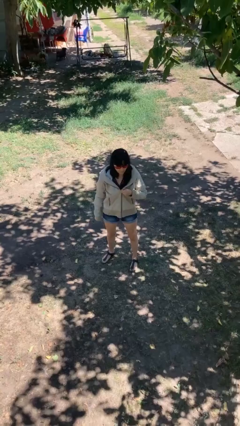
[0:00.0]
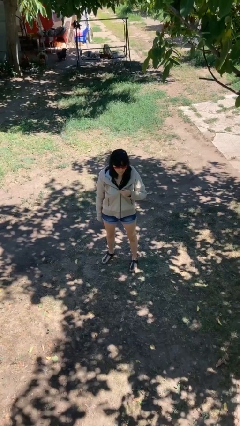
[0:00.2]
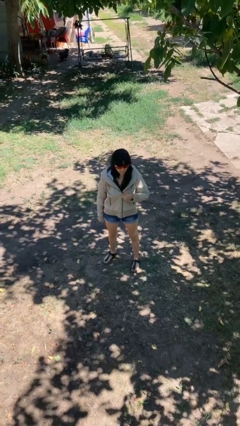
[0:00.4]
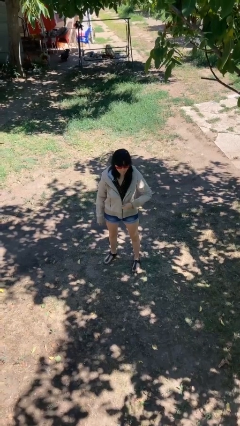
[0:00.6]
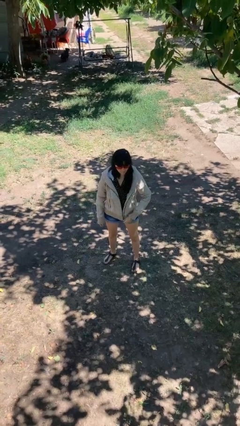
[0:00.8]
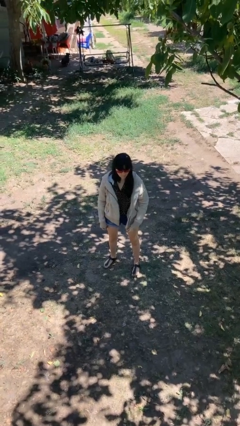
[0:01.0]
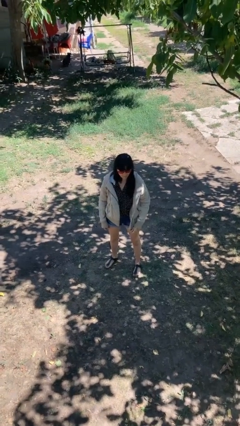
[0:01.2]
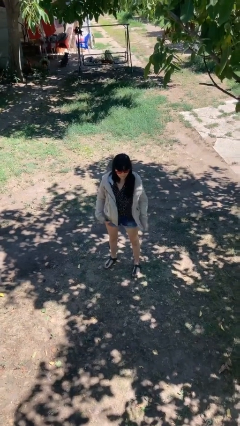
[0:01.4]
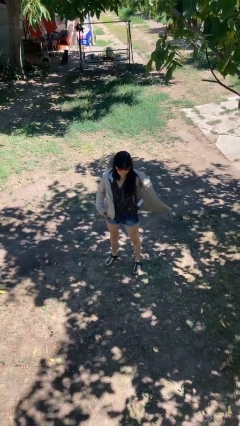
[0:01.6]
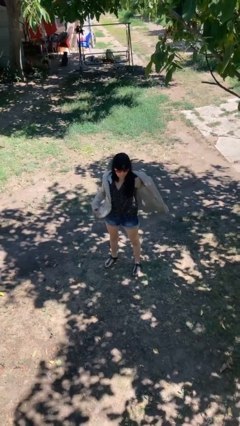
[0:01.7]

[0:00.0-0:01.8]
person unzips jacket

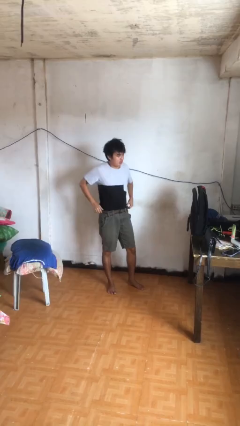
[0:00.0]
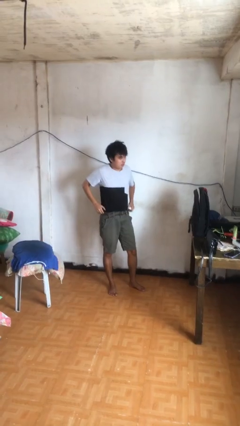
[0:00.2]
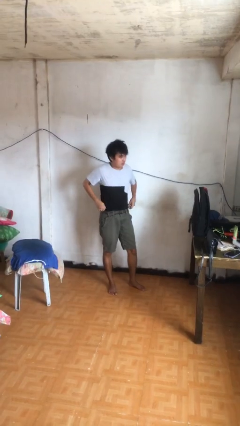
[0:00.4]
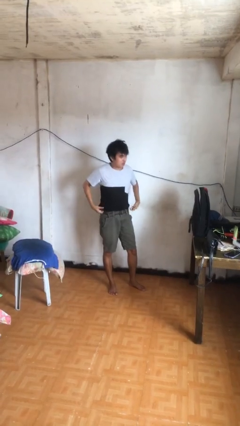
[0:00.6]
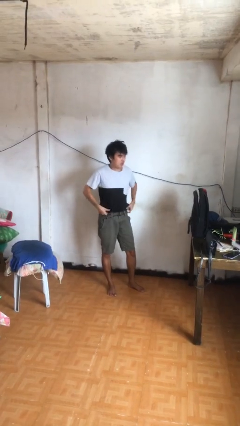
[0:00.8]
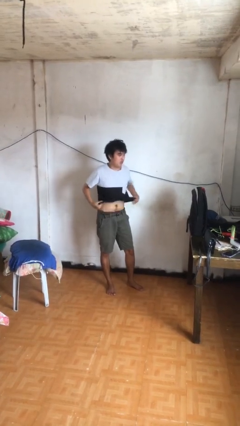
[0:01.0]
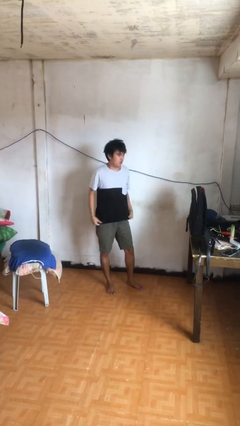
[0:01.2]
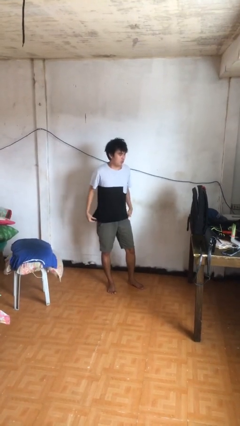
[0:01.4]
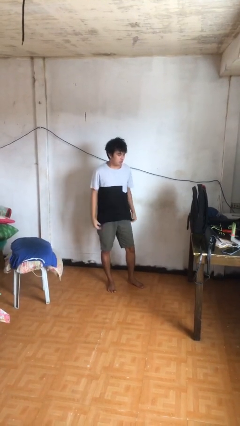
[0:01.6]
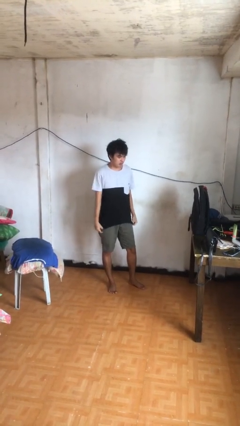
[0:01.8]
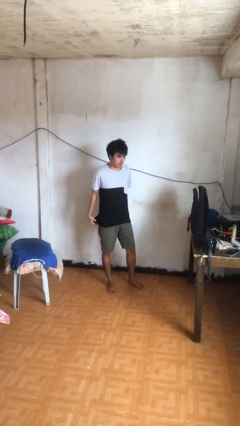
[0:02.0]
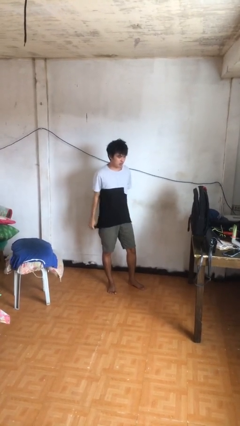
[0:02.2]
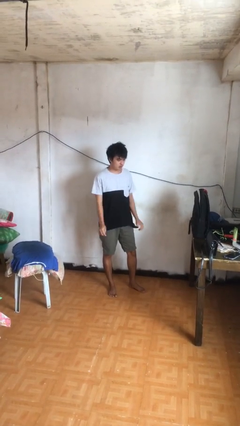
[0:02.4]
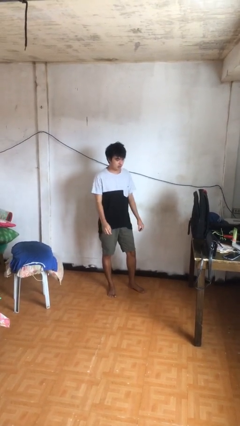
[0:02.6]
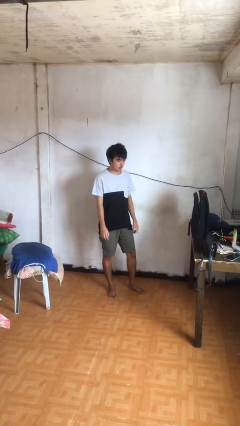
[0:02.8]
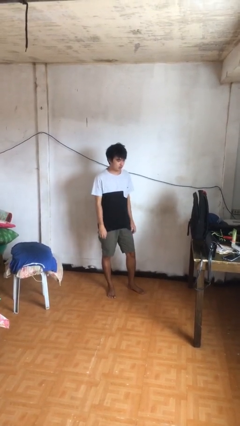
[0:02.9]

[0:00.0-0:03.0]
person untucks shirt

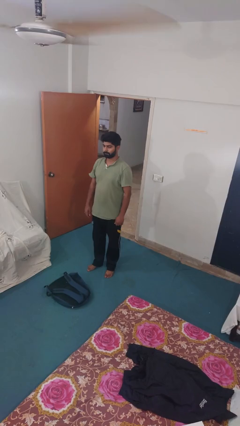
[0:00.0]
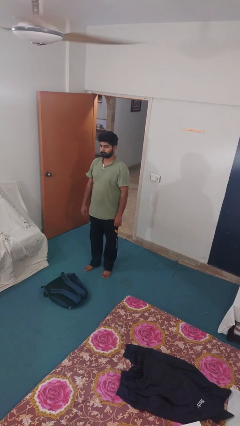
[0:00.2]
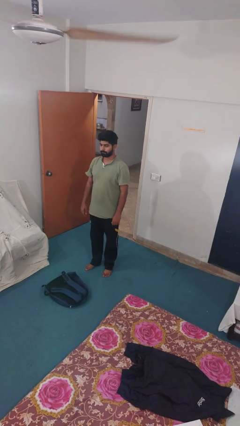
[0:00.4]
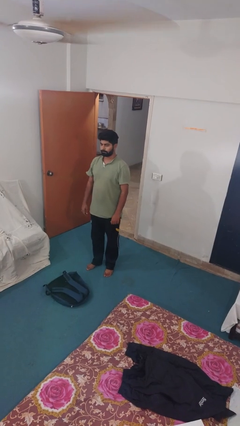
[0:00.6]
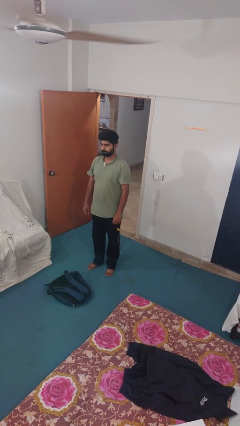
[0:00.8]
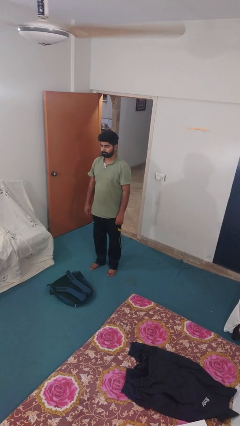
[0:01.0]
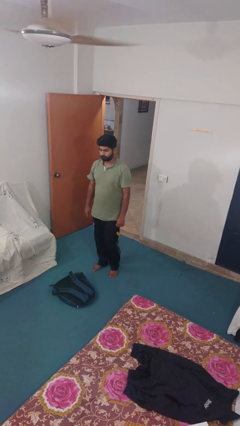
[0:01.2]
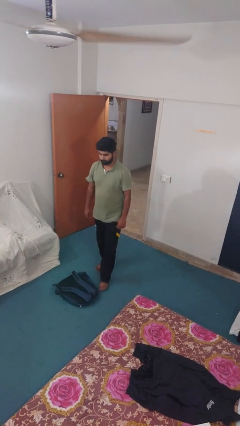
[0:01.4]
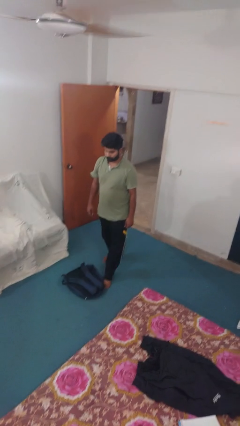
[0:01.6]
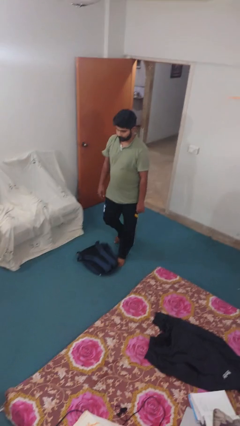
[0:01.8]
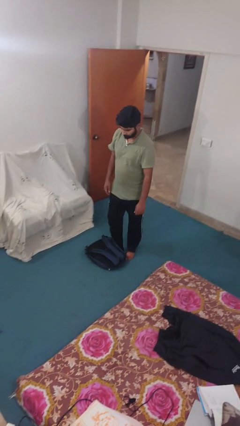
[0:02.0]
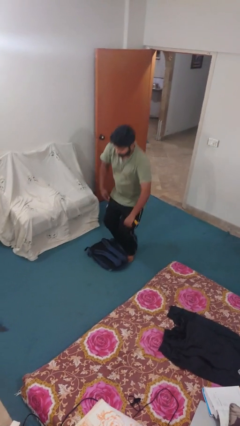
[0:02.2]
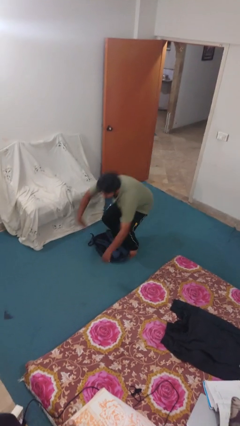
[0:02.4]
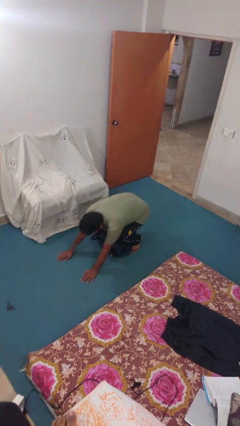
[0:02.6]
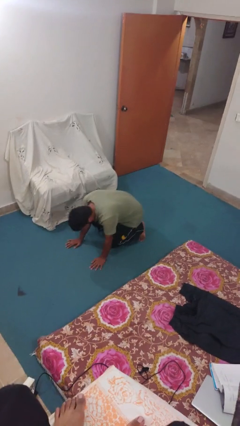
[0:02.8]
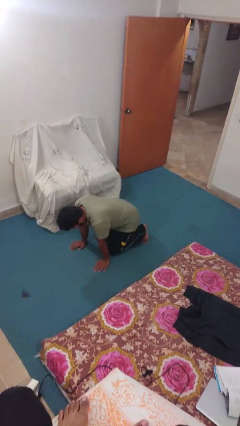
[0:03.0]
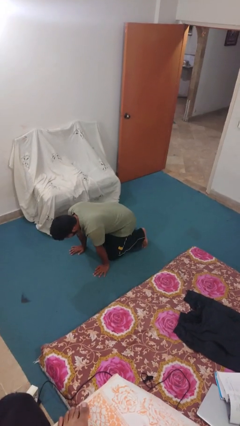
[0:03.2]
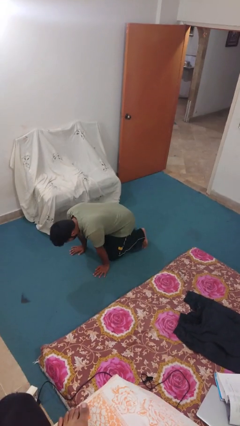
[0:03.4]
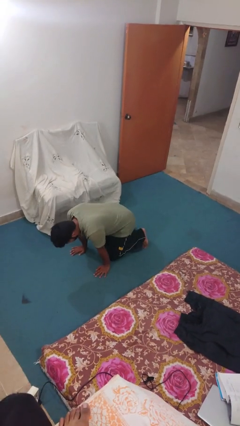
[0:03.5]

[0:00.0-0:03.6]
person trips on object on floor

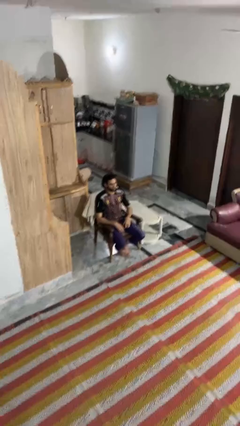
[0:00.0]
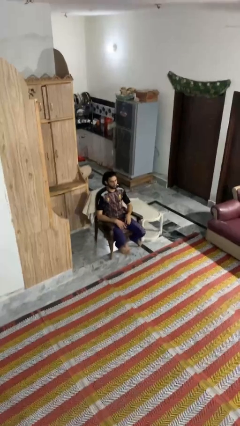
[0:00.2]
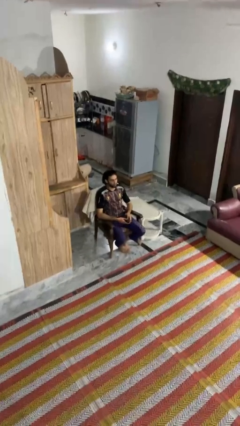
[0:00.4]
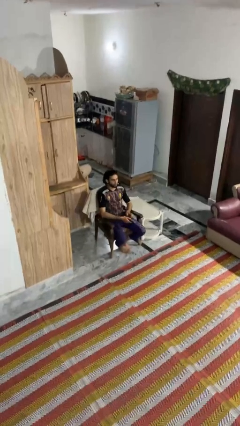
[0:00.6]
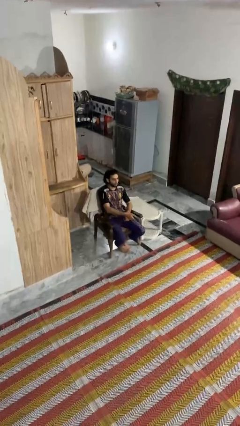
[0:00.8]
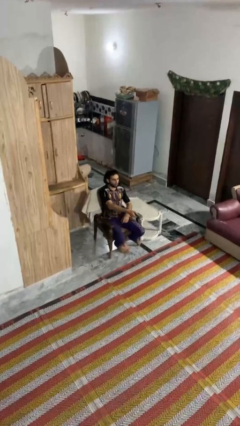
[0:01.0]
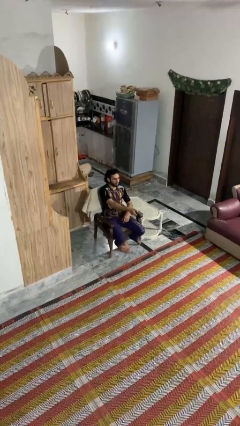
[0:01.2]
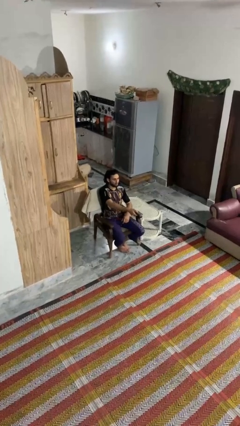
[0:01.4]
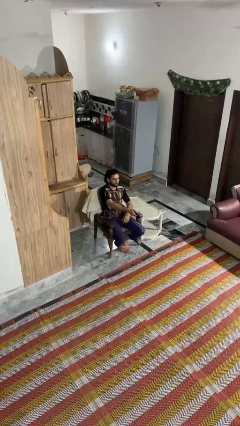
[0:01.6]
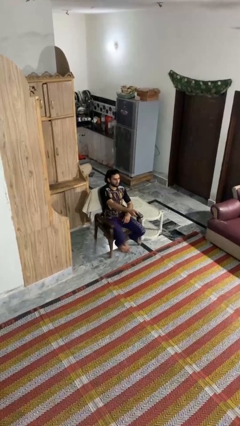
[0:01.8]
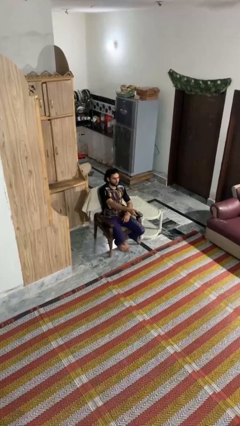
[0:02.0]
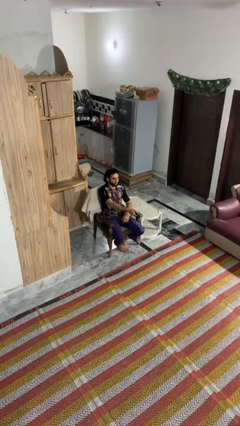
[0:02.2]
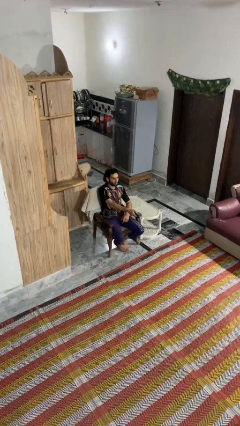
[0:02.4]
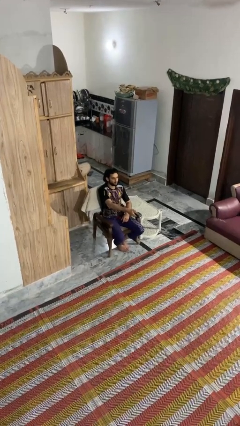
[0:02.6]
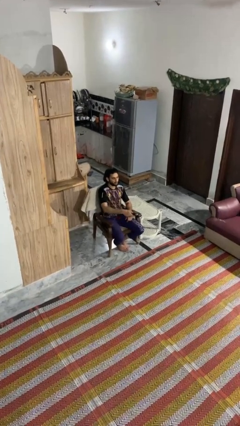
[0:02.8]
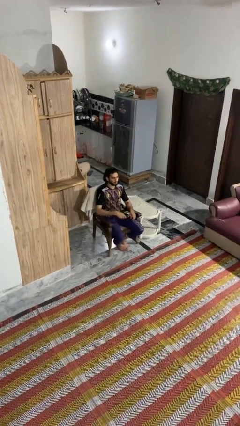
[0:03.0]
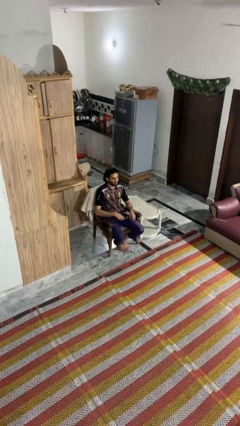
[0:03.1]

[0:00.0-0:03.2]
person uses television remote

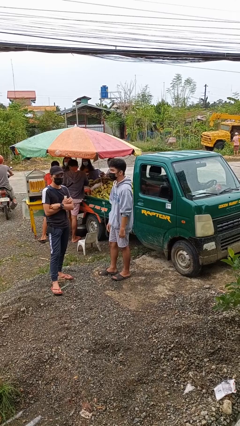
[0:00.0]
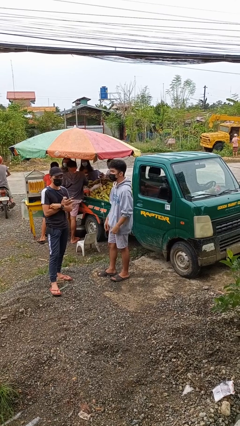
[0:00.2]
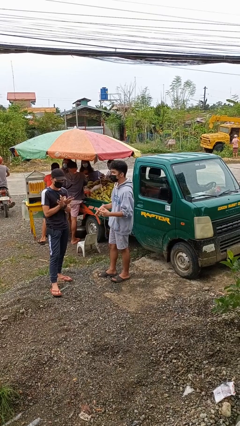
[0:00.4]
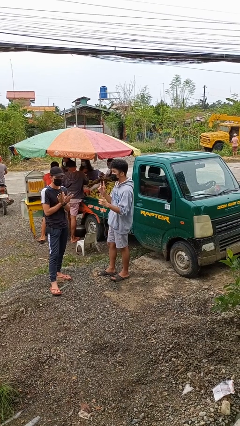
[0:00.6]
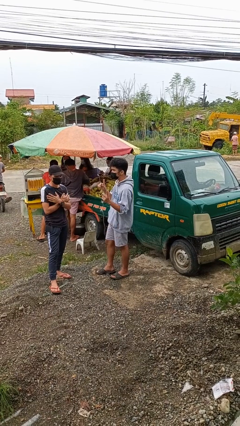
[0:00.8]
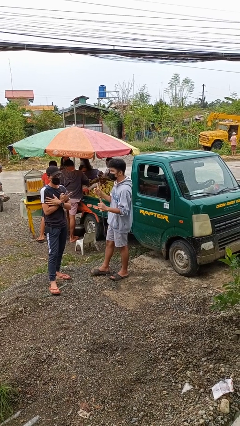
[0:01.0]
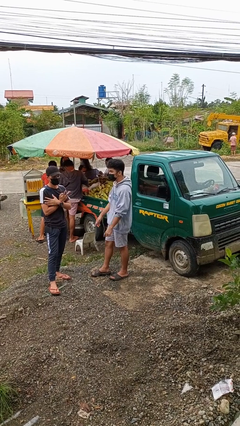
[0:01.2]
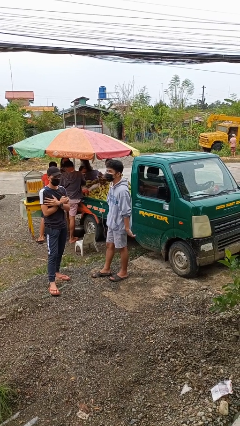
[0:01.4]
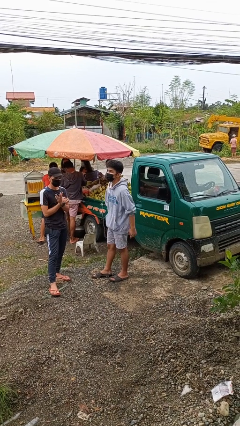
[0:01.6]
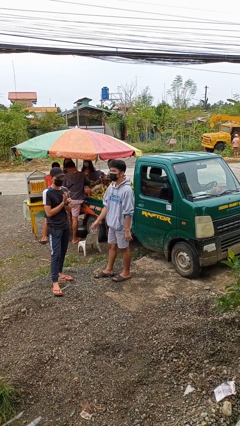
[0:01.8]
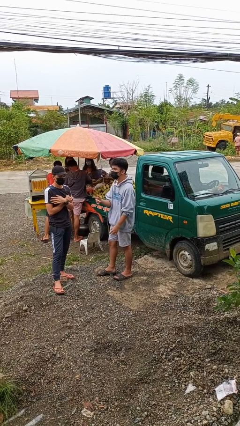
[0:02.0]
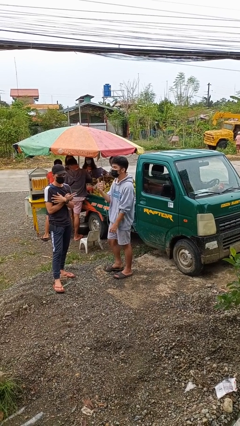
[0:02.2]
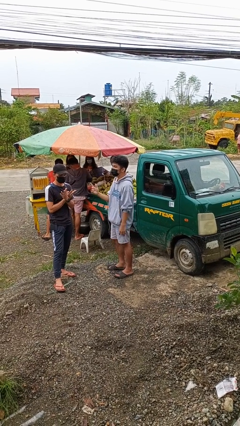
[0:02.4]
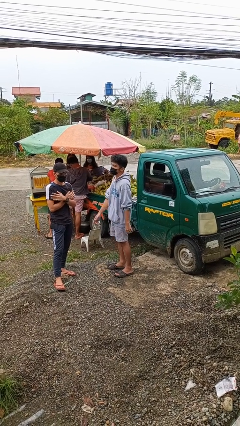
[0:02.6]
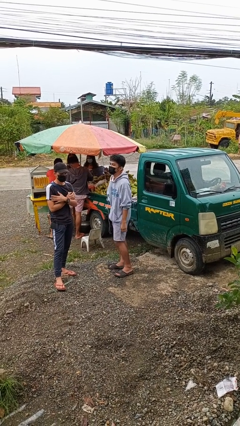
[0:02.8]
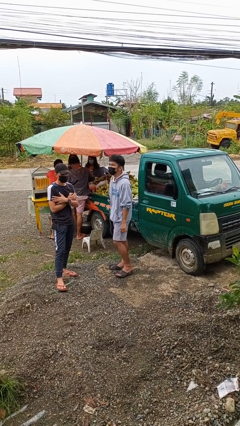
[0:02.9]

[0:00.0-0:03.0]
person talks to person

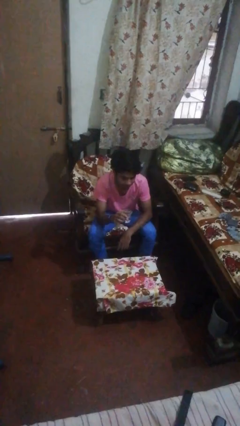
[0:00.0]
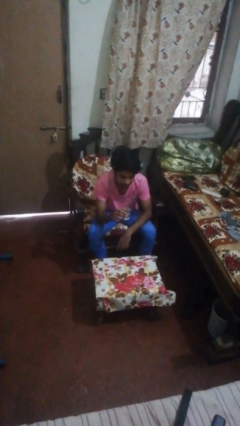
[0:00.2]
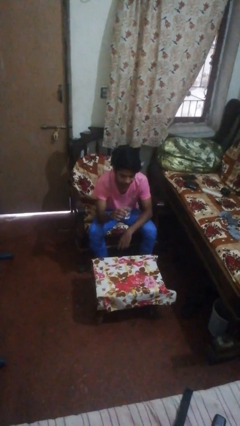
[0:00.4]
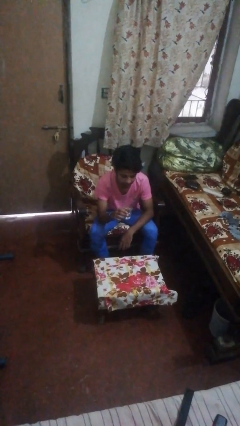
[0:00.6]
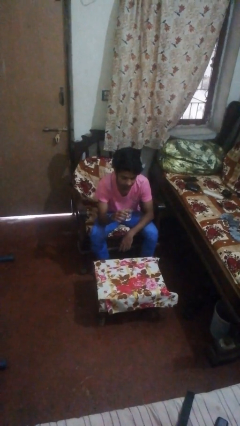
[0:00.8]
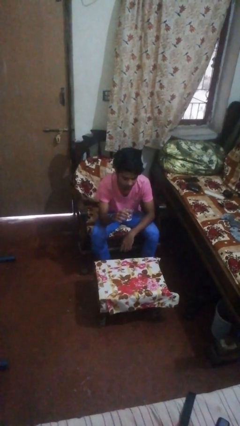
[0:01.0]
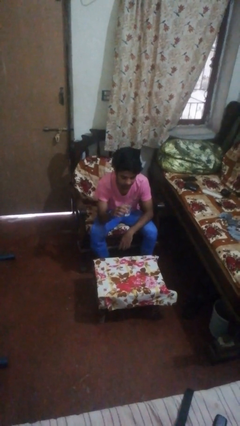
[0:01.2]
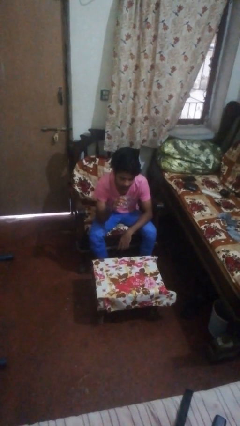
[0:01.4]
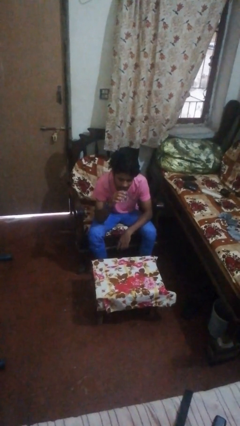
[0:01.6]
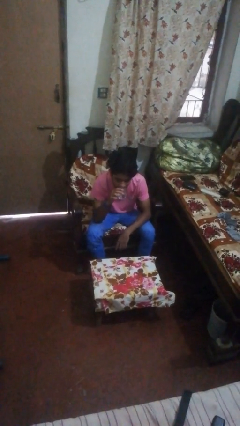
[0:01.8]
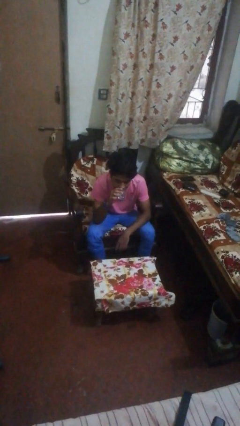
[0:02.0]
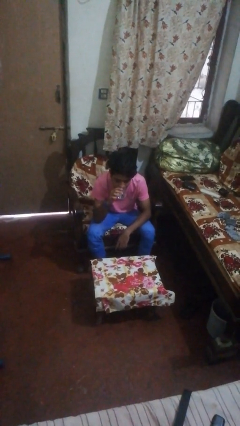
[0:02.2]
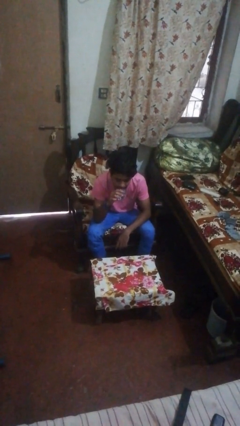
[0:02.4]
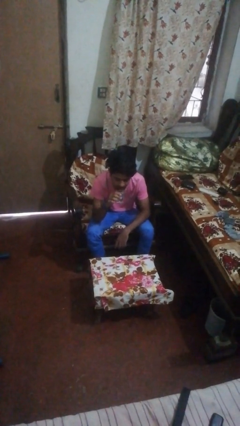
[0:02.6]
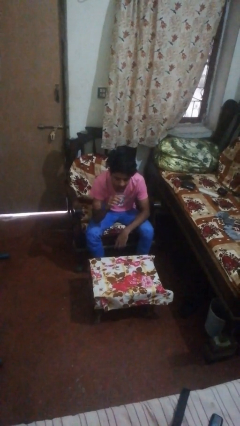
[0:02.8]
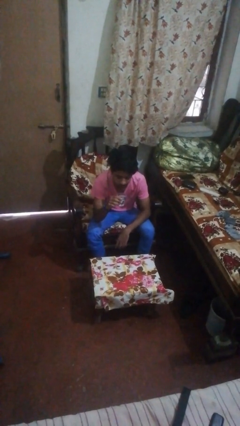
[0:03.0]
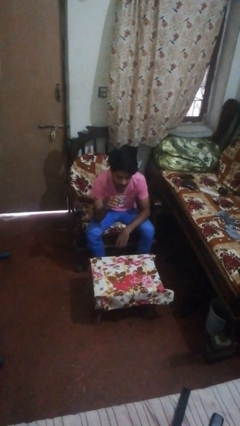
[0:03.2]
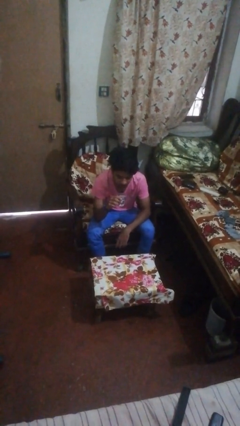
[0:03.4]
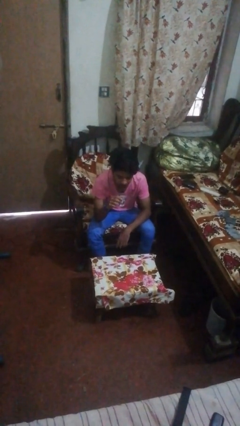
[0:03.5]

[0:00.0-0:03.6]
person drinks from shotglass
